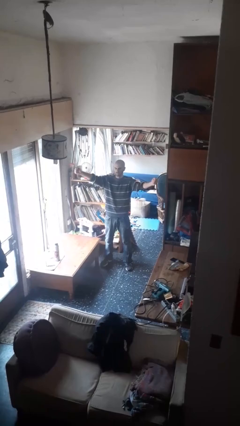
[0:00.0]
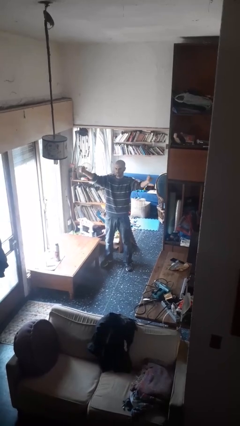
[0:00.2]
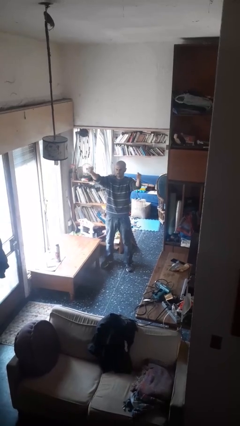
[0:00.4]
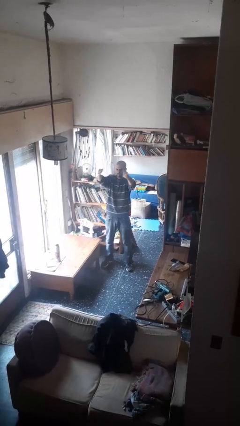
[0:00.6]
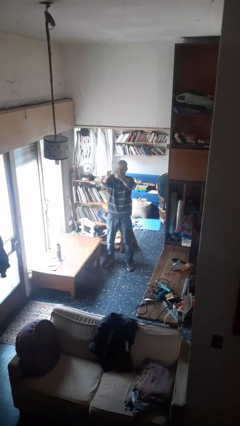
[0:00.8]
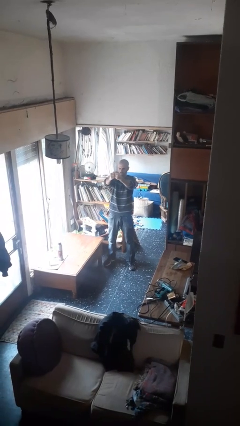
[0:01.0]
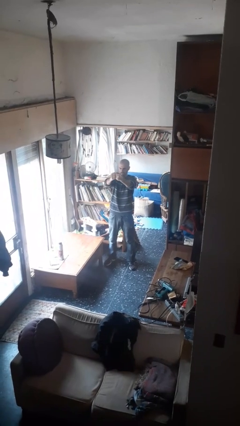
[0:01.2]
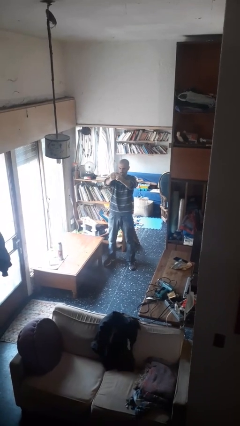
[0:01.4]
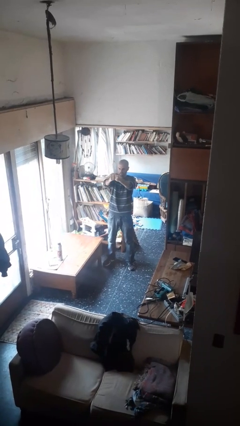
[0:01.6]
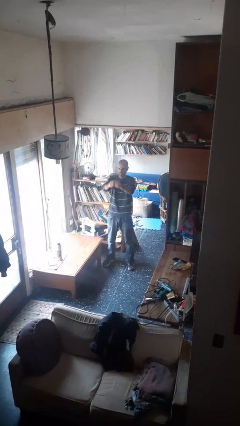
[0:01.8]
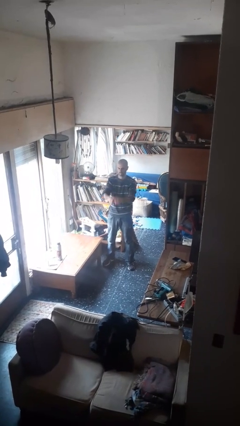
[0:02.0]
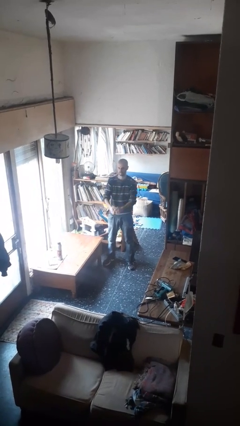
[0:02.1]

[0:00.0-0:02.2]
person gestures zoom out

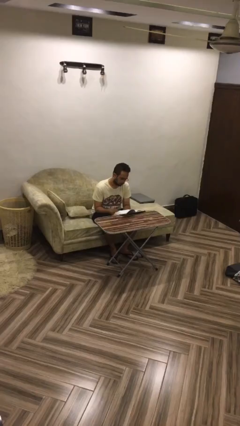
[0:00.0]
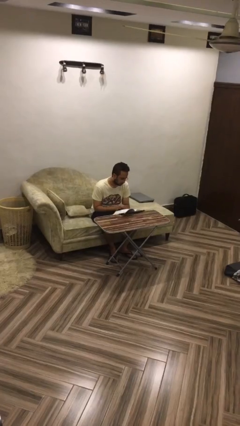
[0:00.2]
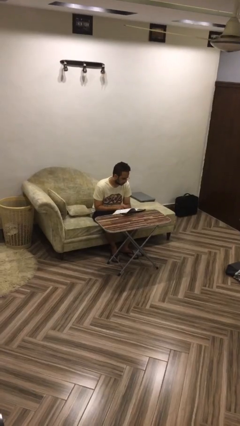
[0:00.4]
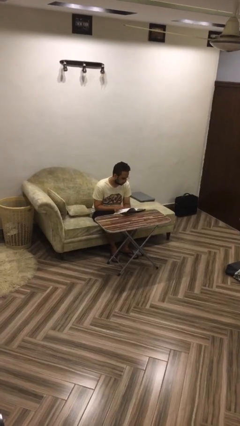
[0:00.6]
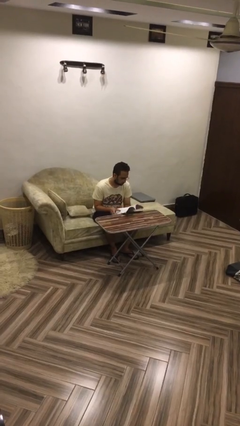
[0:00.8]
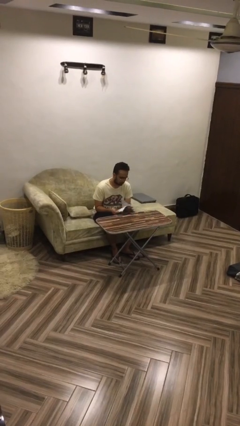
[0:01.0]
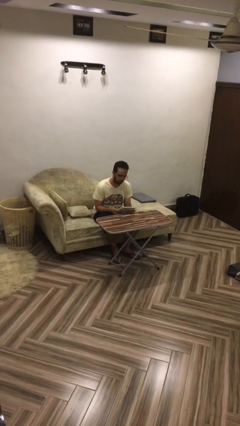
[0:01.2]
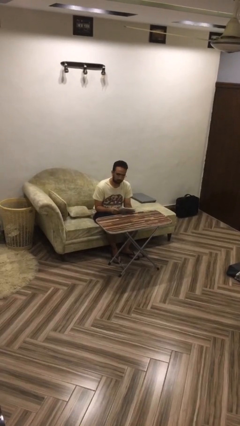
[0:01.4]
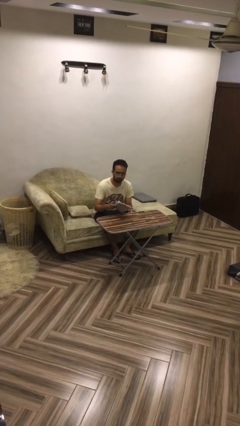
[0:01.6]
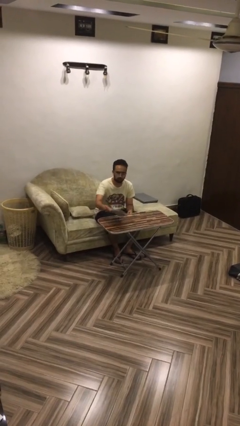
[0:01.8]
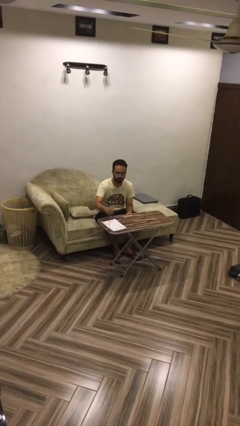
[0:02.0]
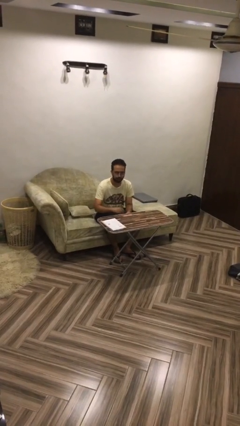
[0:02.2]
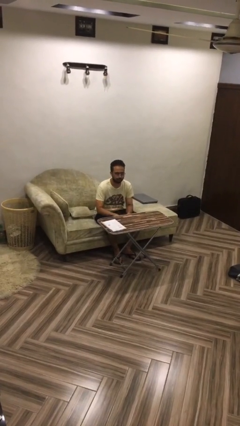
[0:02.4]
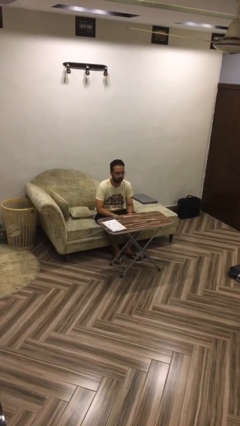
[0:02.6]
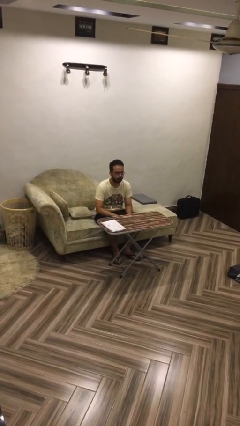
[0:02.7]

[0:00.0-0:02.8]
person puts down object on table

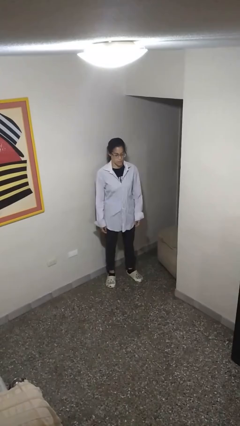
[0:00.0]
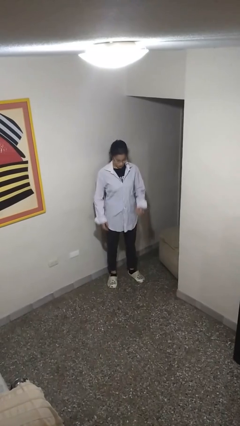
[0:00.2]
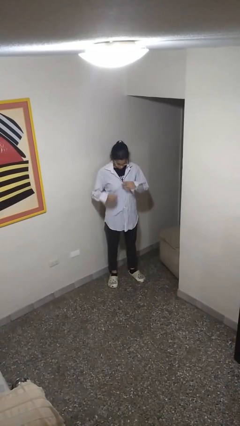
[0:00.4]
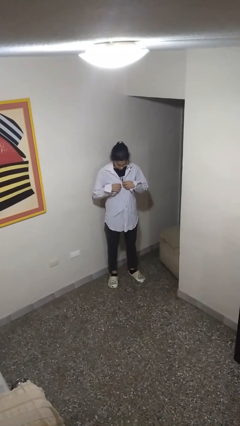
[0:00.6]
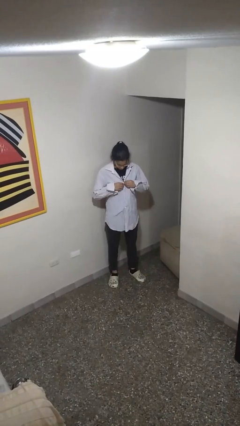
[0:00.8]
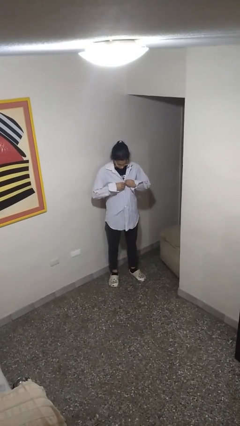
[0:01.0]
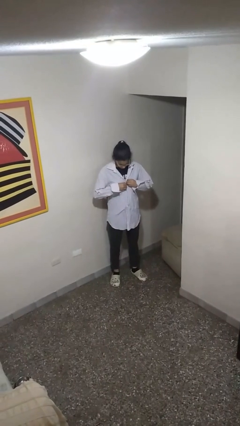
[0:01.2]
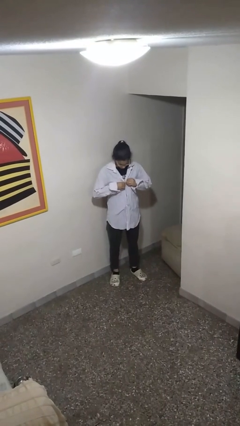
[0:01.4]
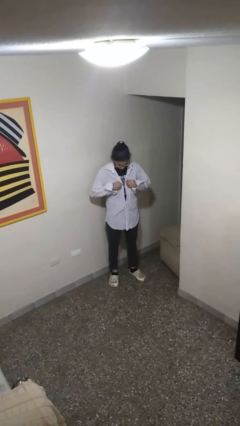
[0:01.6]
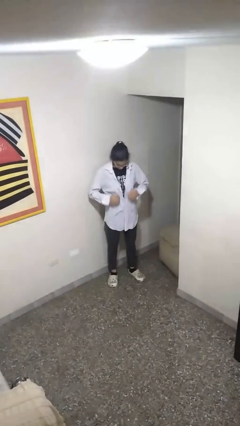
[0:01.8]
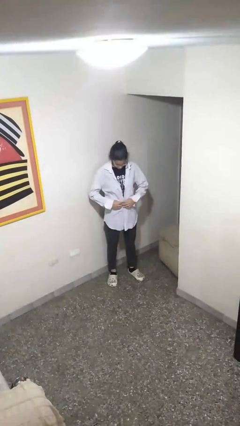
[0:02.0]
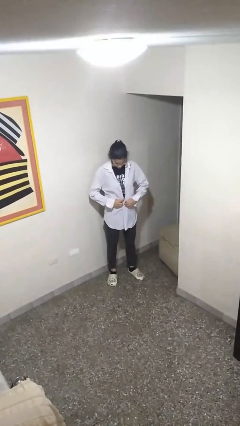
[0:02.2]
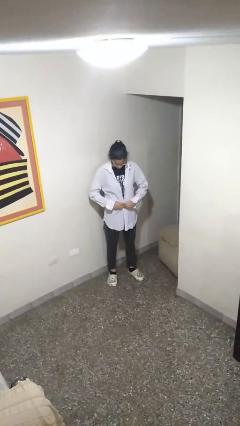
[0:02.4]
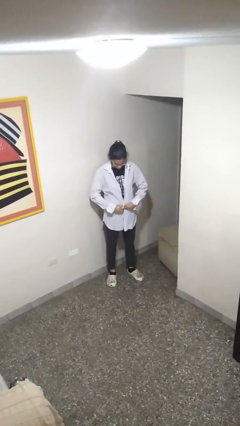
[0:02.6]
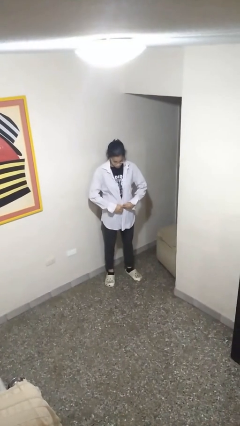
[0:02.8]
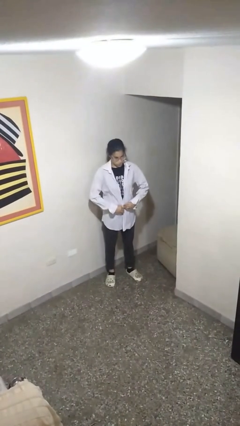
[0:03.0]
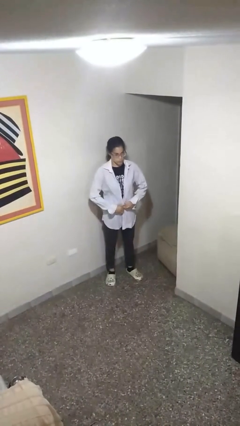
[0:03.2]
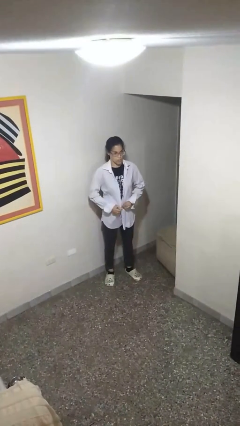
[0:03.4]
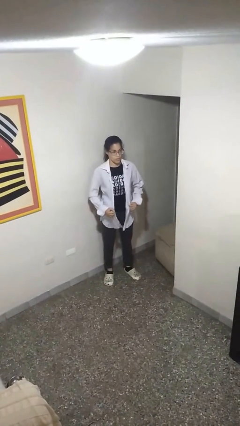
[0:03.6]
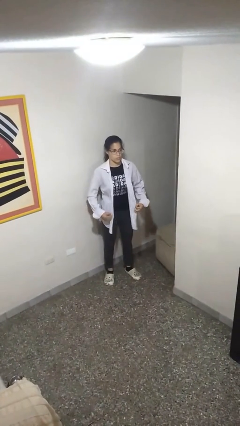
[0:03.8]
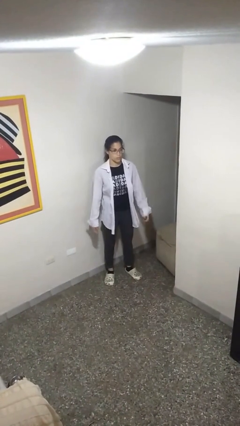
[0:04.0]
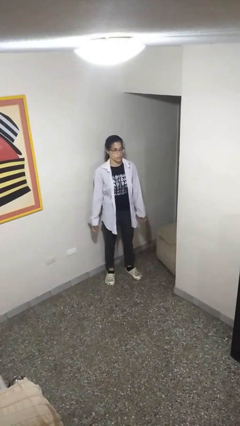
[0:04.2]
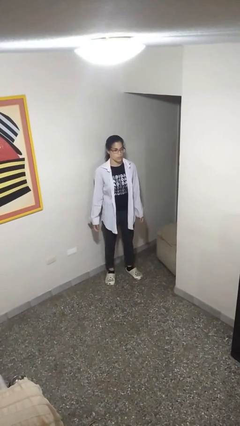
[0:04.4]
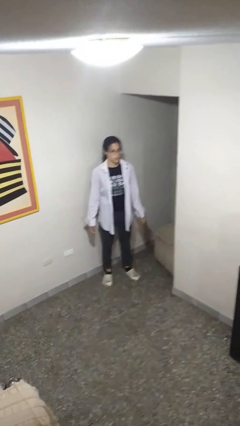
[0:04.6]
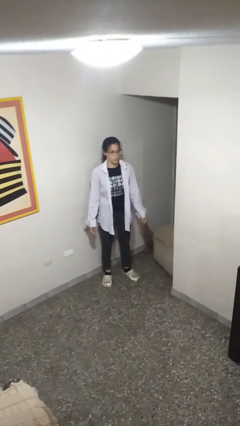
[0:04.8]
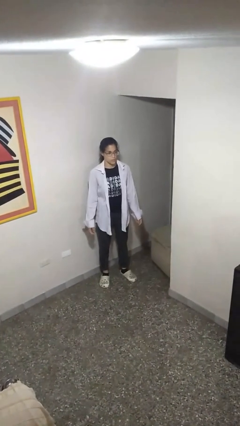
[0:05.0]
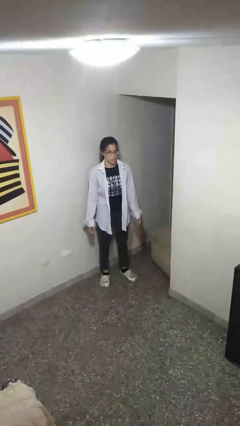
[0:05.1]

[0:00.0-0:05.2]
person unbuttons shirt

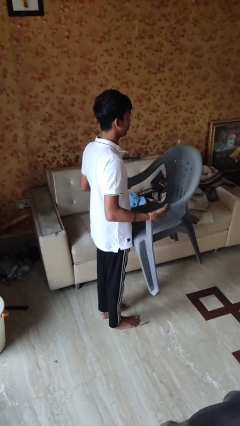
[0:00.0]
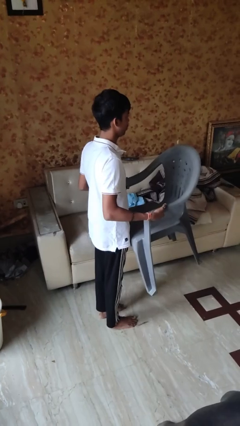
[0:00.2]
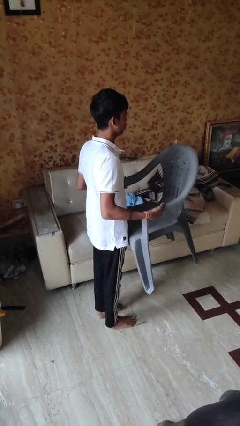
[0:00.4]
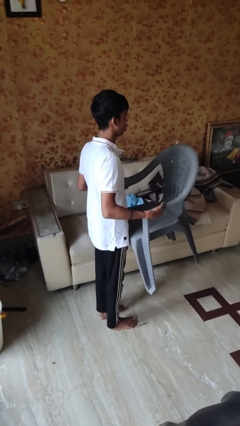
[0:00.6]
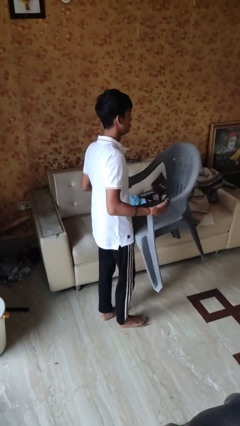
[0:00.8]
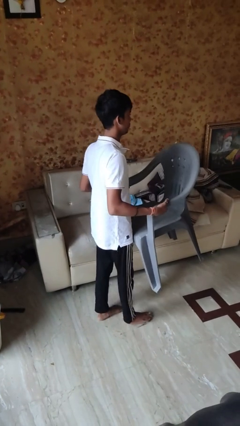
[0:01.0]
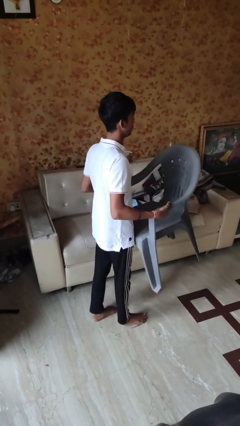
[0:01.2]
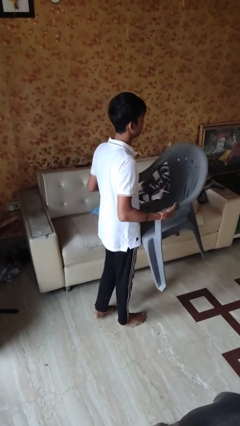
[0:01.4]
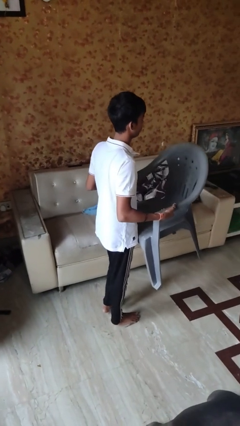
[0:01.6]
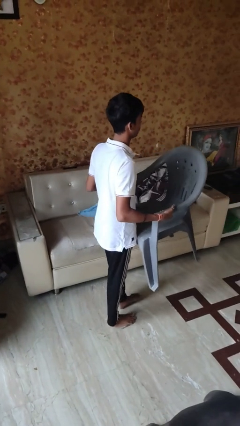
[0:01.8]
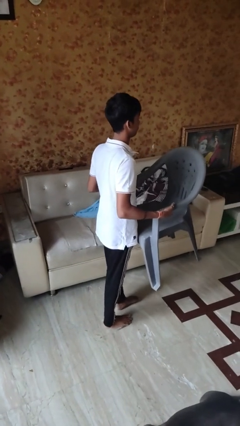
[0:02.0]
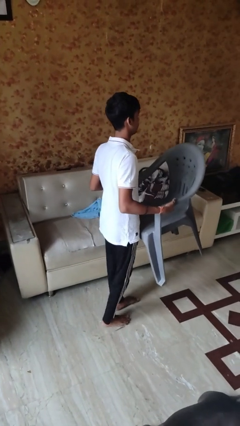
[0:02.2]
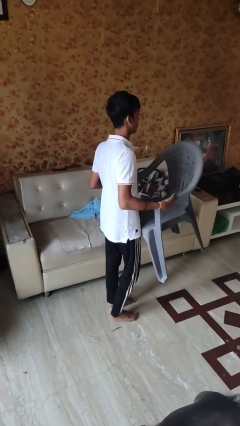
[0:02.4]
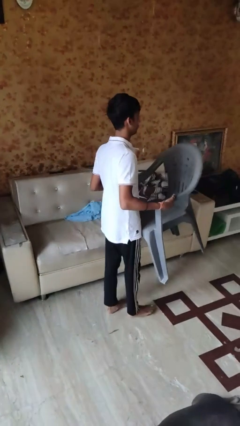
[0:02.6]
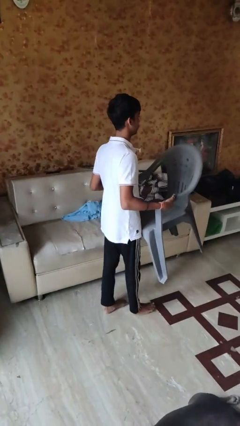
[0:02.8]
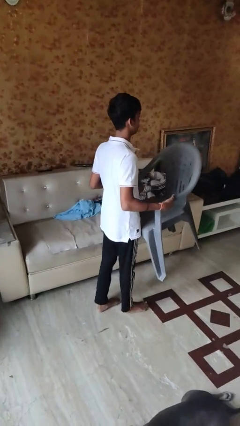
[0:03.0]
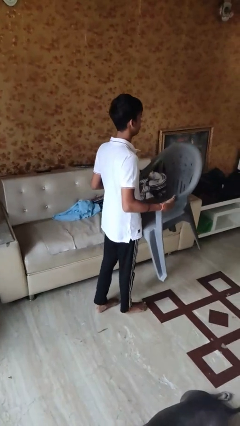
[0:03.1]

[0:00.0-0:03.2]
person carries furniture

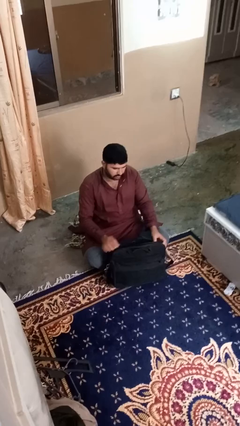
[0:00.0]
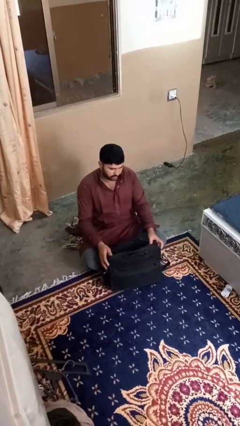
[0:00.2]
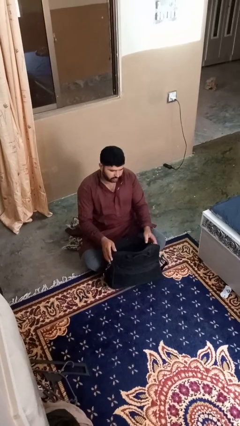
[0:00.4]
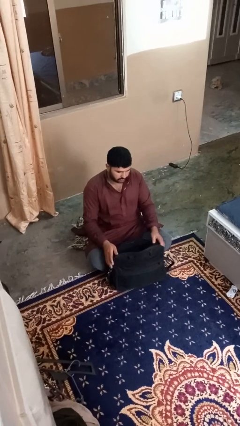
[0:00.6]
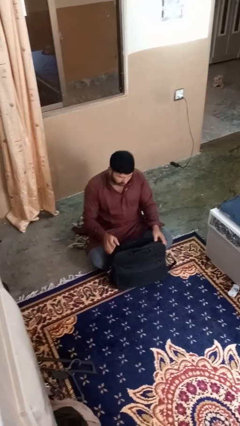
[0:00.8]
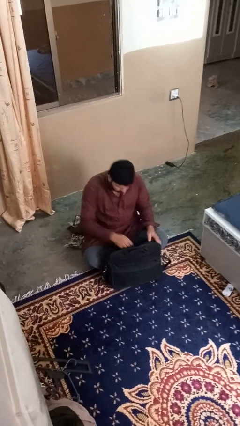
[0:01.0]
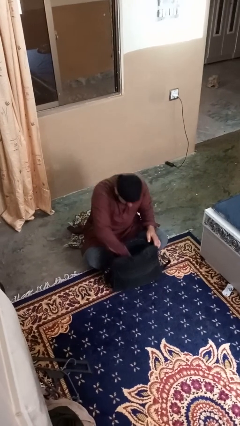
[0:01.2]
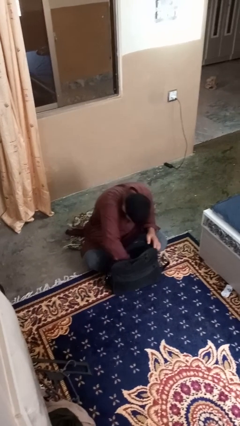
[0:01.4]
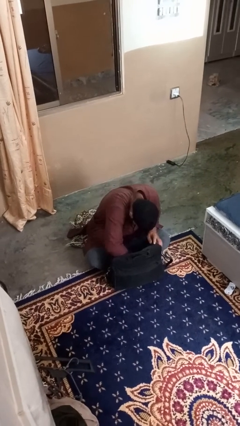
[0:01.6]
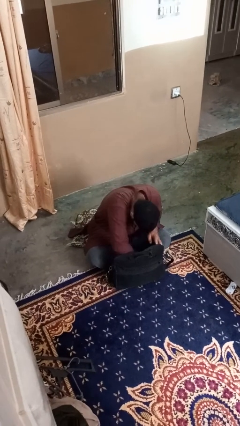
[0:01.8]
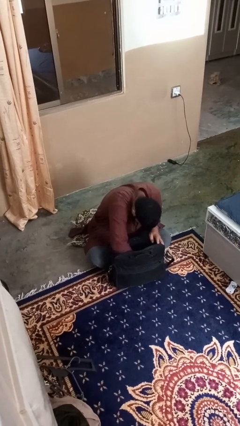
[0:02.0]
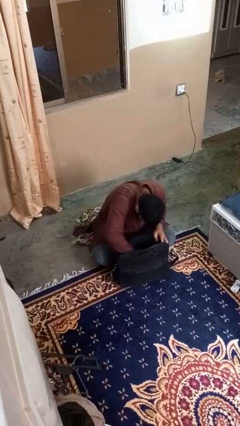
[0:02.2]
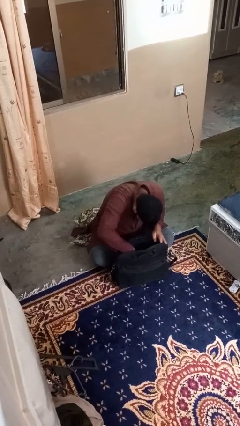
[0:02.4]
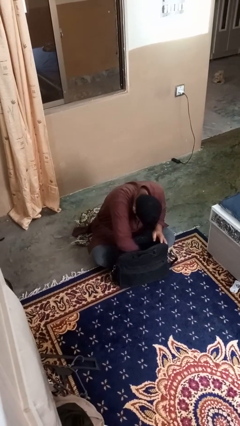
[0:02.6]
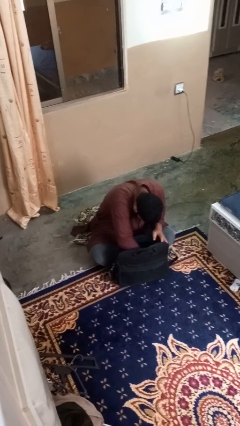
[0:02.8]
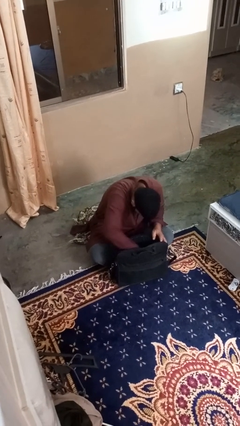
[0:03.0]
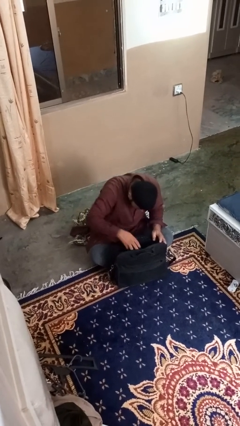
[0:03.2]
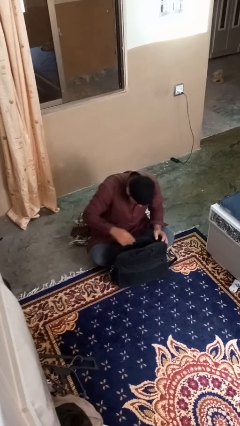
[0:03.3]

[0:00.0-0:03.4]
person searches in bag

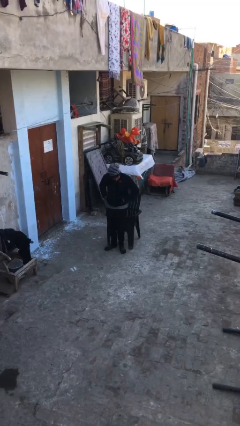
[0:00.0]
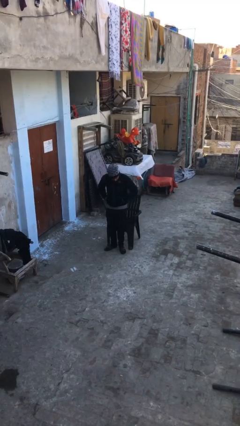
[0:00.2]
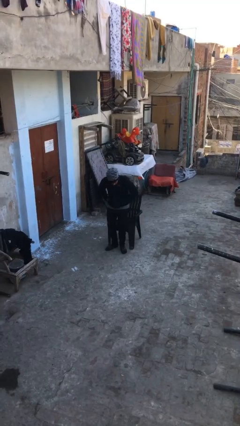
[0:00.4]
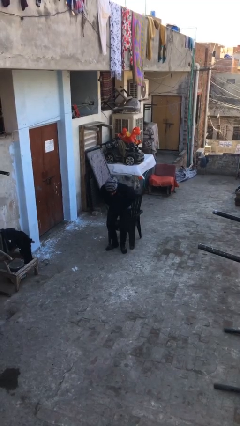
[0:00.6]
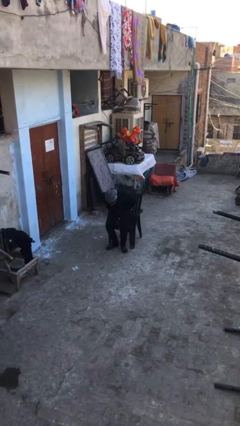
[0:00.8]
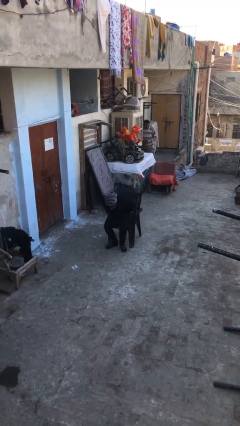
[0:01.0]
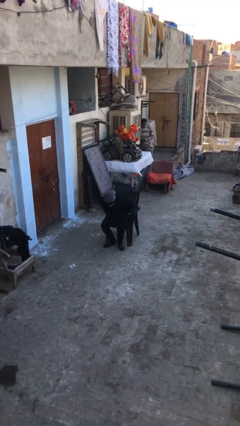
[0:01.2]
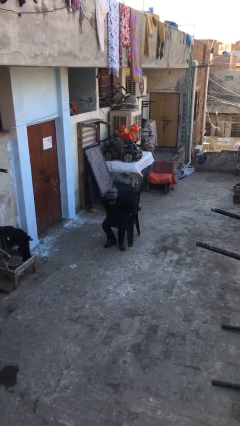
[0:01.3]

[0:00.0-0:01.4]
person sits down
